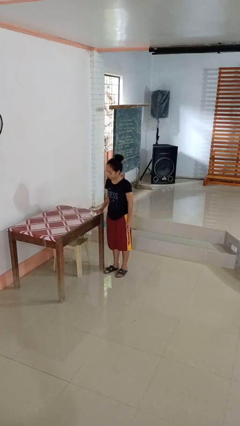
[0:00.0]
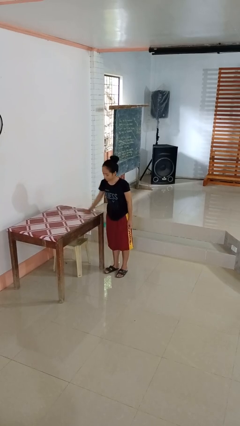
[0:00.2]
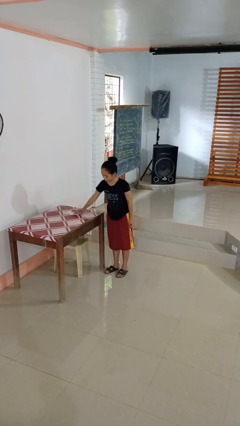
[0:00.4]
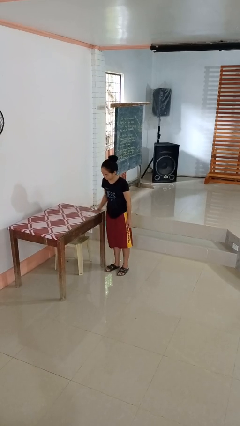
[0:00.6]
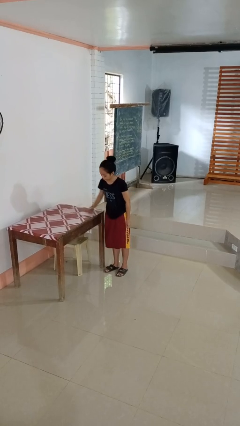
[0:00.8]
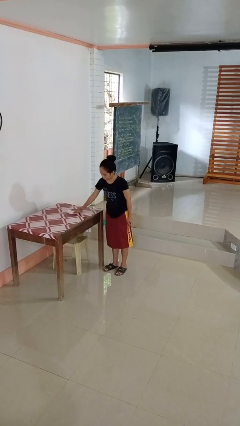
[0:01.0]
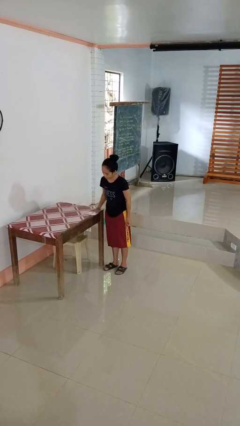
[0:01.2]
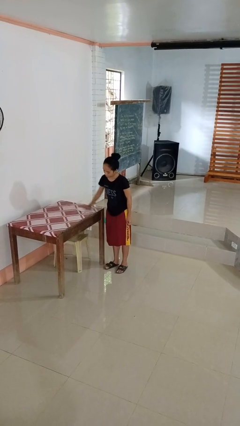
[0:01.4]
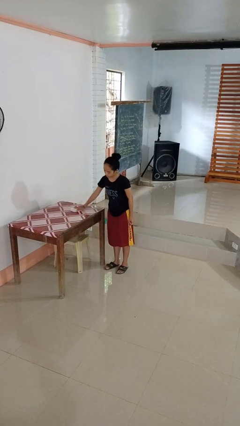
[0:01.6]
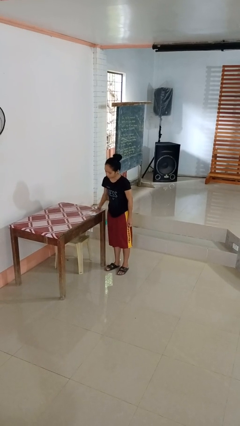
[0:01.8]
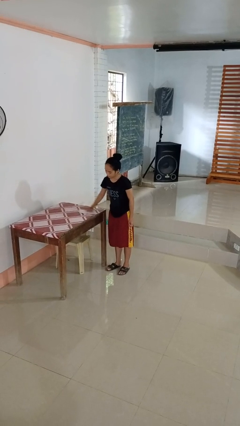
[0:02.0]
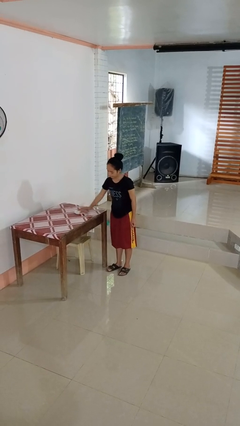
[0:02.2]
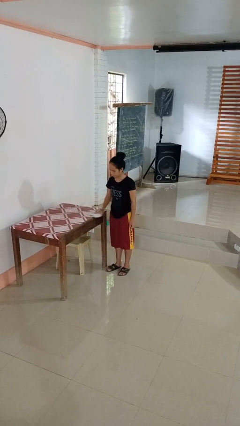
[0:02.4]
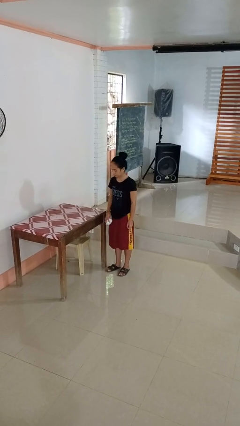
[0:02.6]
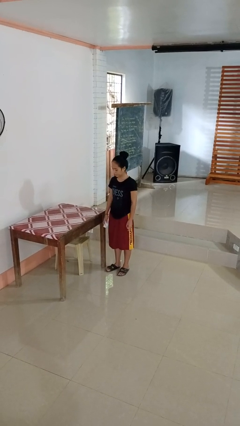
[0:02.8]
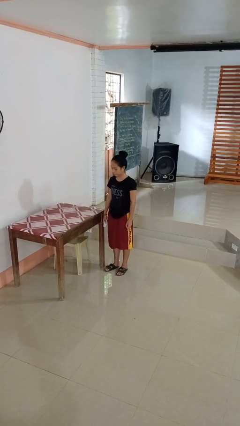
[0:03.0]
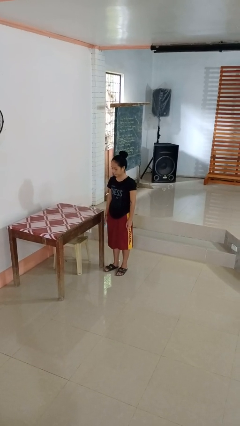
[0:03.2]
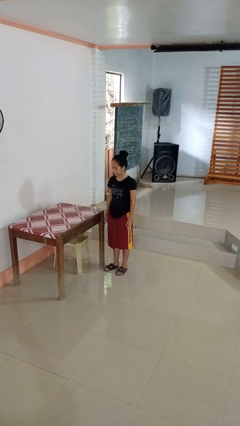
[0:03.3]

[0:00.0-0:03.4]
person cleans table with rag

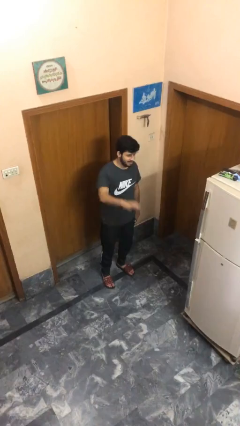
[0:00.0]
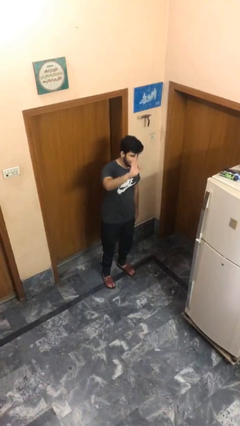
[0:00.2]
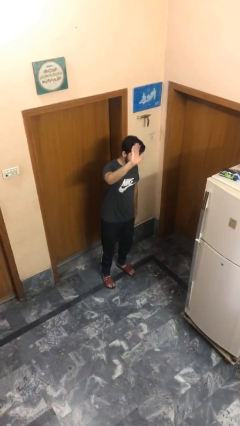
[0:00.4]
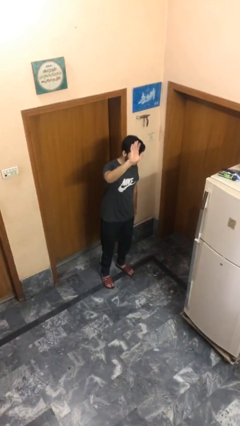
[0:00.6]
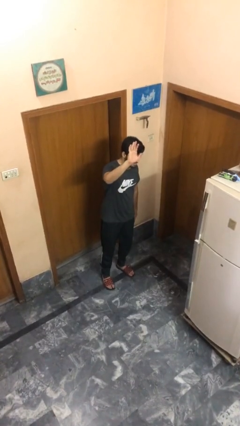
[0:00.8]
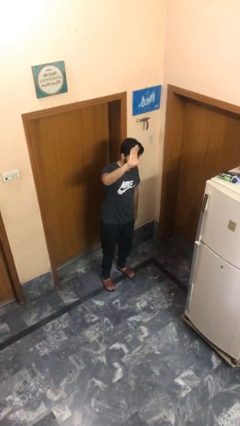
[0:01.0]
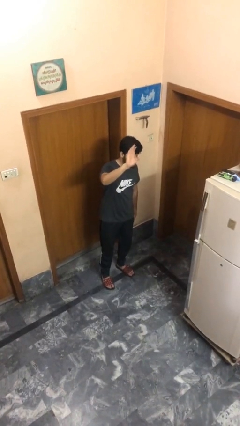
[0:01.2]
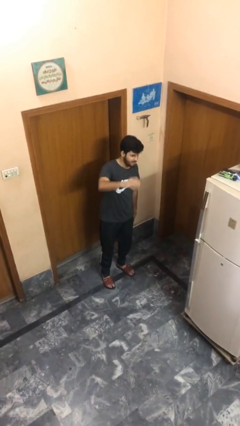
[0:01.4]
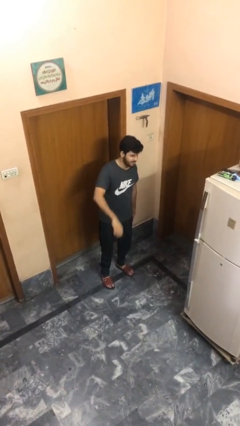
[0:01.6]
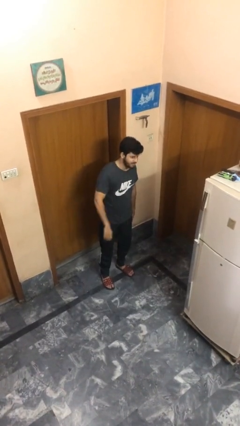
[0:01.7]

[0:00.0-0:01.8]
person waves at person

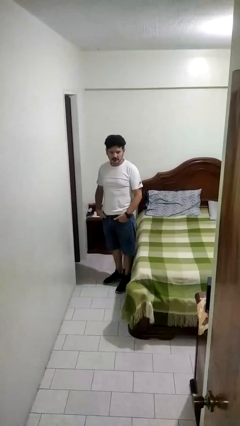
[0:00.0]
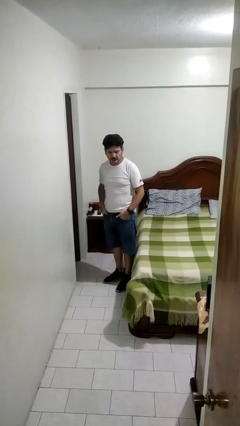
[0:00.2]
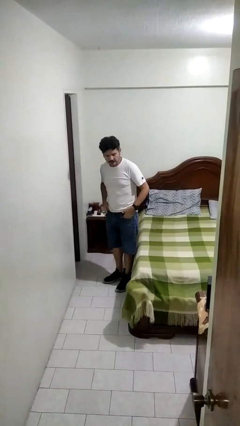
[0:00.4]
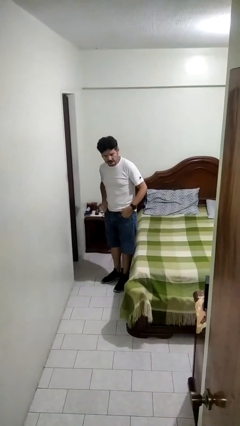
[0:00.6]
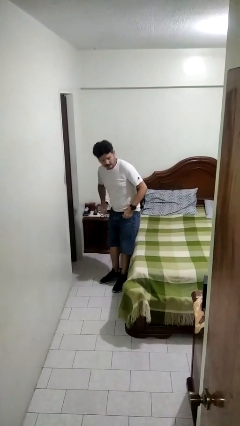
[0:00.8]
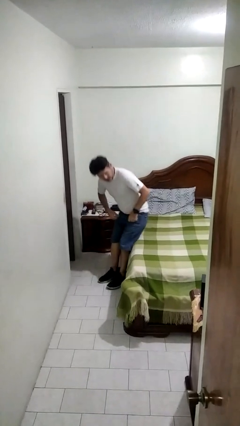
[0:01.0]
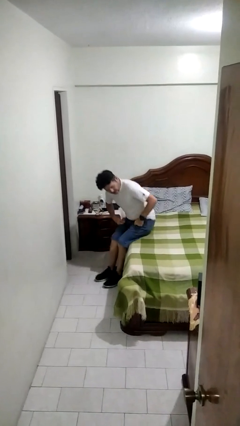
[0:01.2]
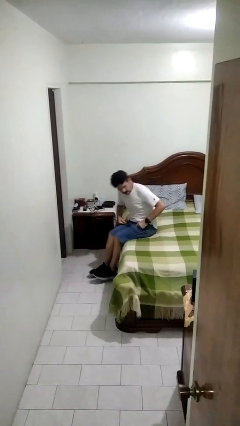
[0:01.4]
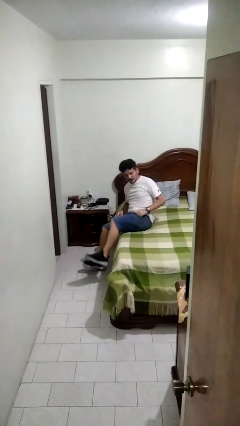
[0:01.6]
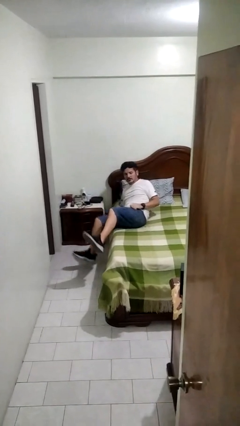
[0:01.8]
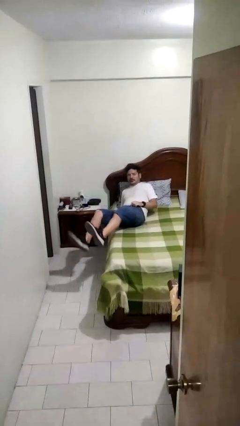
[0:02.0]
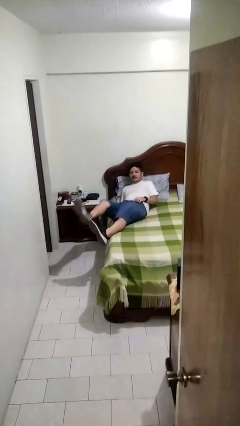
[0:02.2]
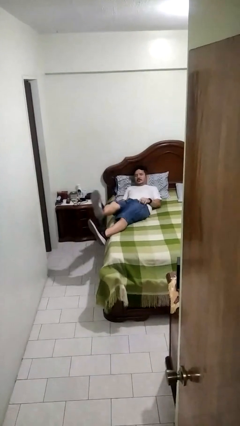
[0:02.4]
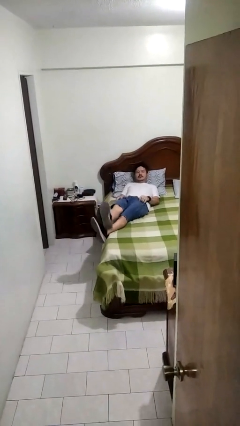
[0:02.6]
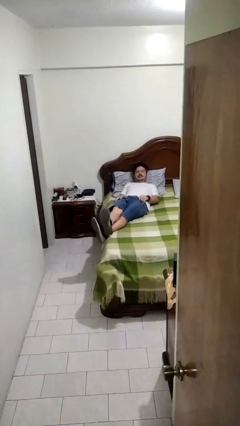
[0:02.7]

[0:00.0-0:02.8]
person lies down on bed

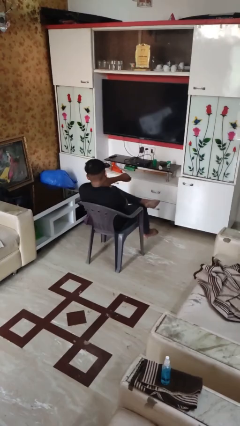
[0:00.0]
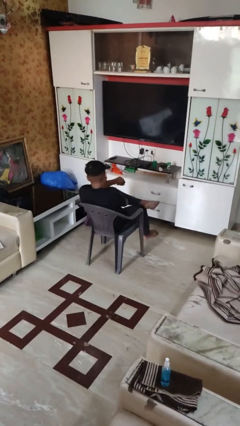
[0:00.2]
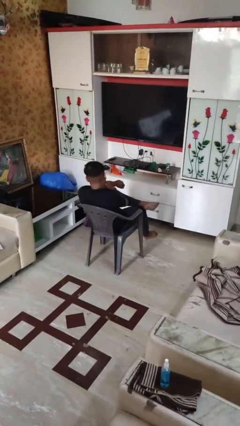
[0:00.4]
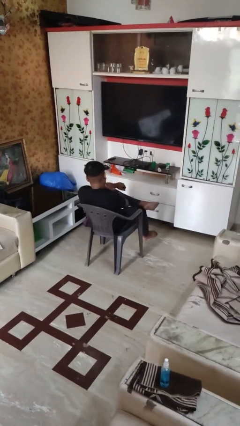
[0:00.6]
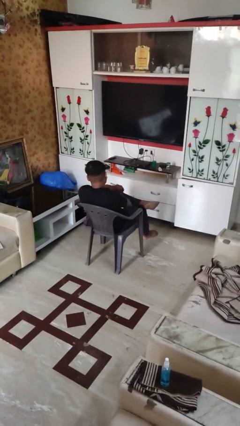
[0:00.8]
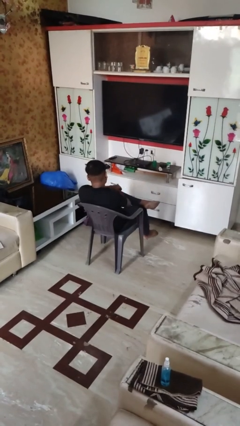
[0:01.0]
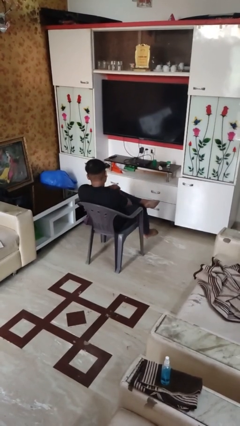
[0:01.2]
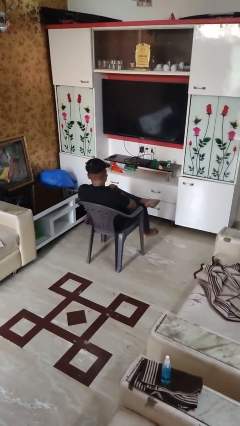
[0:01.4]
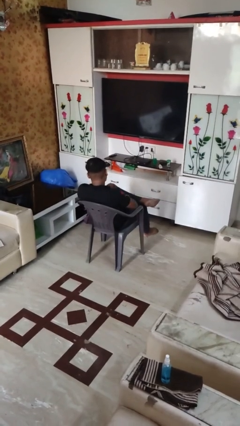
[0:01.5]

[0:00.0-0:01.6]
person swats bug

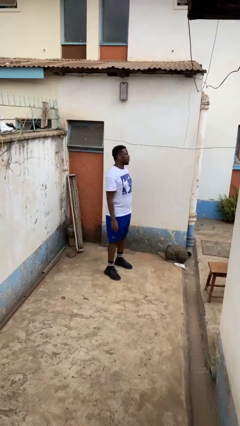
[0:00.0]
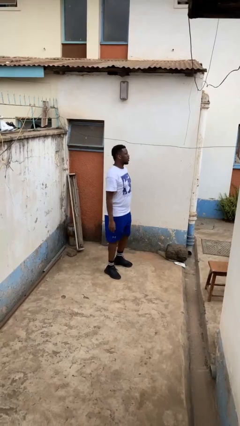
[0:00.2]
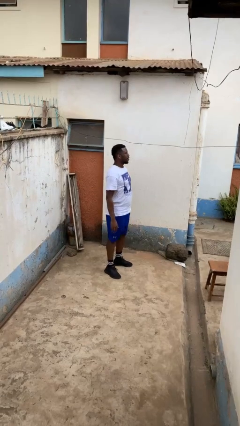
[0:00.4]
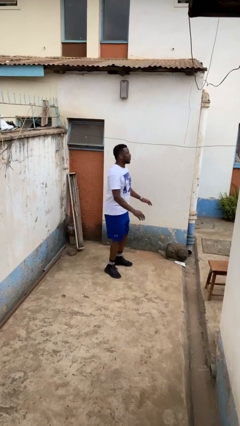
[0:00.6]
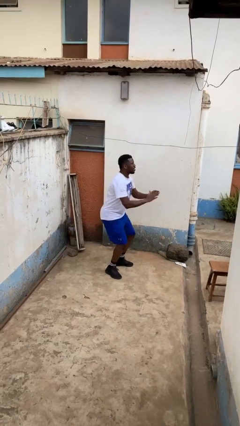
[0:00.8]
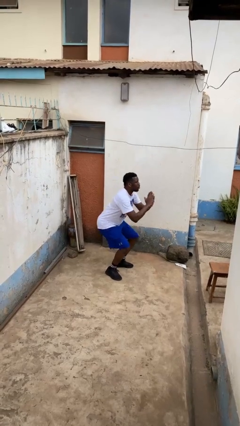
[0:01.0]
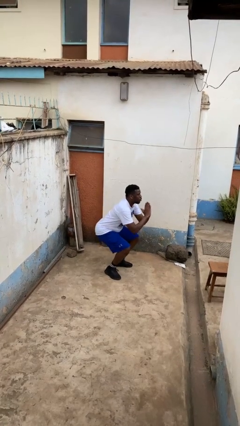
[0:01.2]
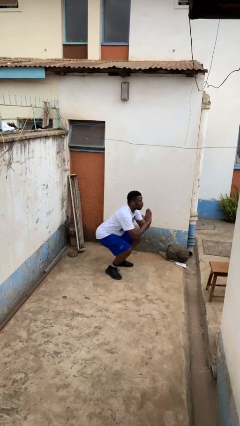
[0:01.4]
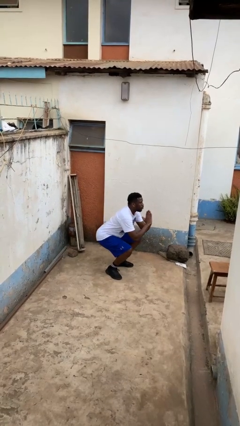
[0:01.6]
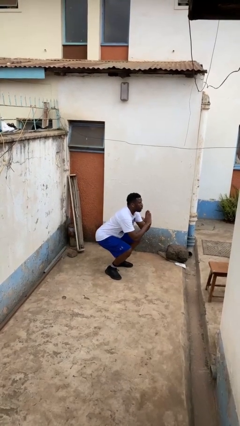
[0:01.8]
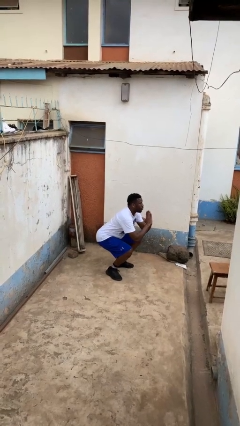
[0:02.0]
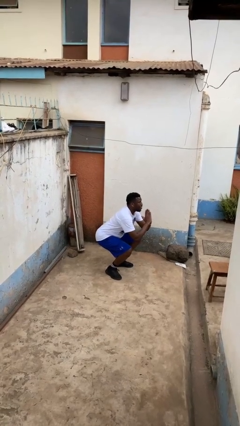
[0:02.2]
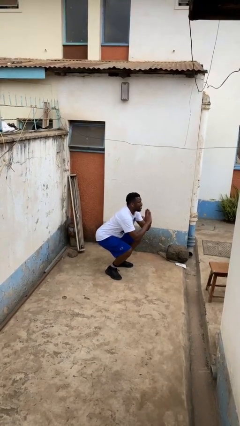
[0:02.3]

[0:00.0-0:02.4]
person squats

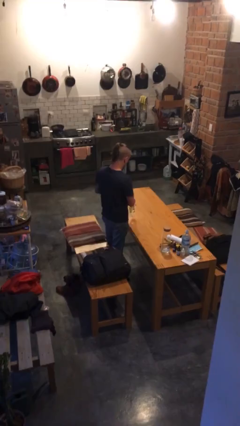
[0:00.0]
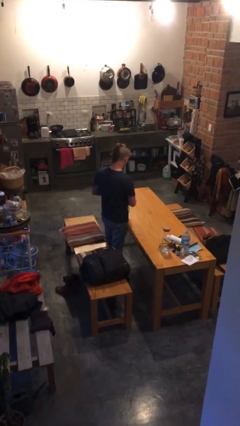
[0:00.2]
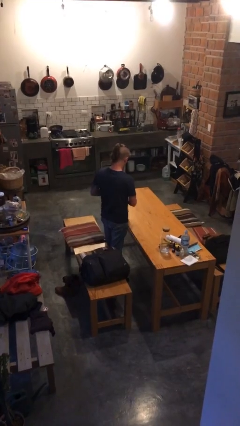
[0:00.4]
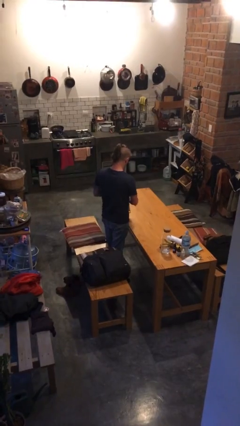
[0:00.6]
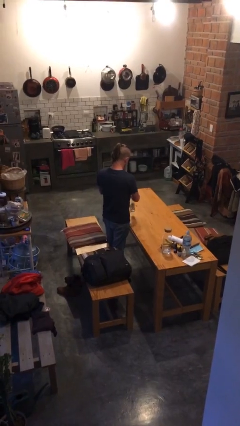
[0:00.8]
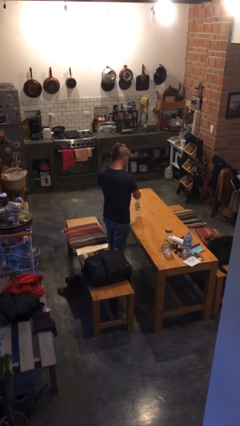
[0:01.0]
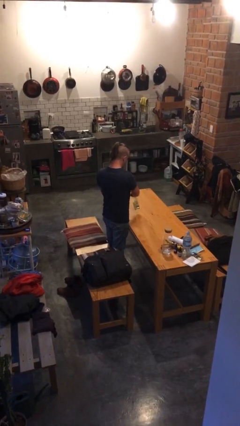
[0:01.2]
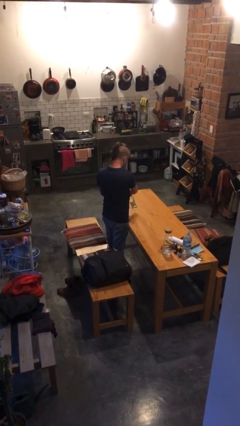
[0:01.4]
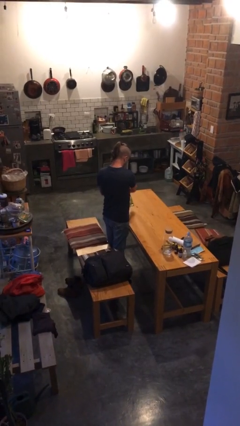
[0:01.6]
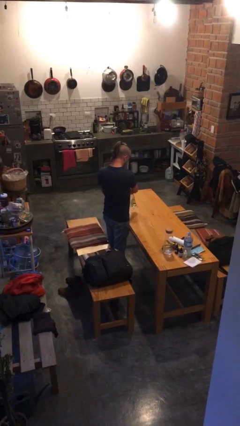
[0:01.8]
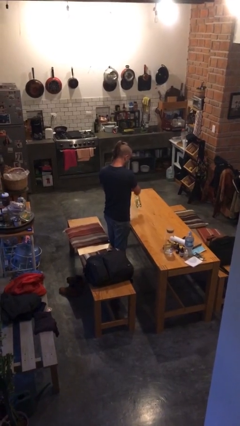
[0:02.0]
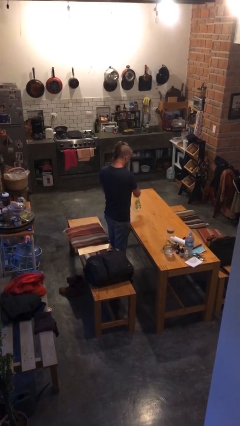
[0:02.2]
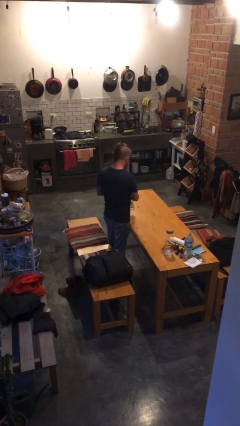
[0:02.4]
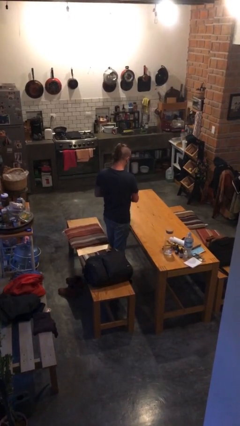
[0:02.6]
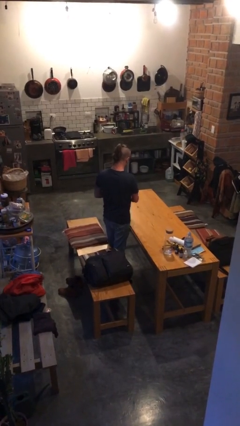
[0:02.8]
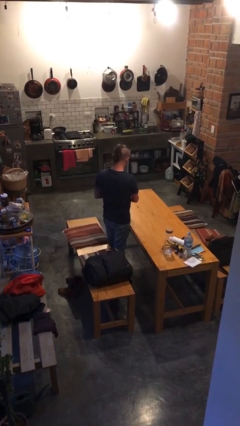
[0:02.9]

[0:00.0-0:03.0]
person sprays from bottle

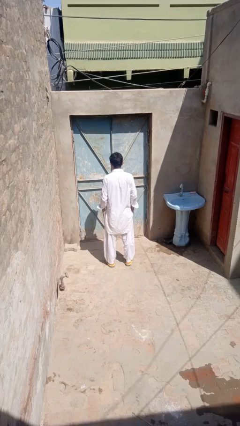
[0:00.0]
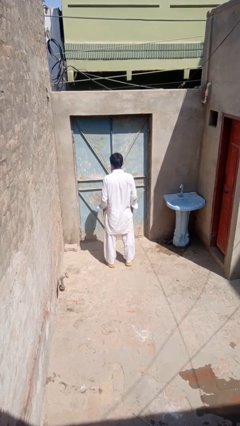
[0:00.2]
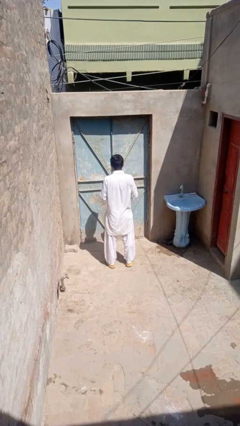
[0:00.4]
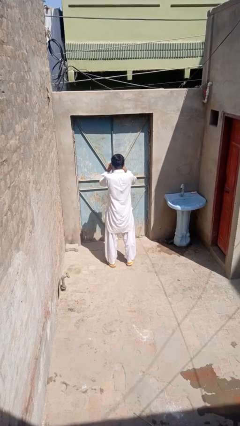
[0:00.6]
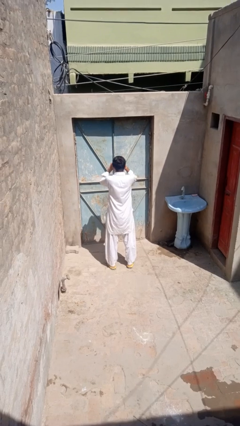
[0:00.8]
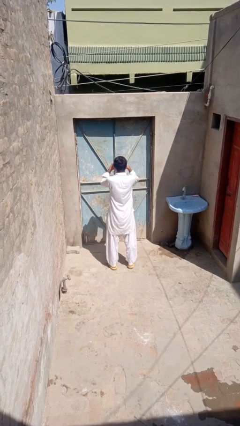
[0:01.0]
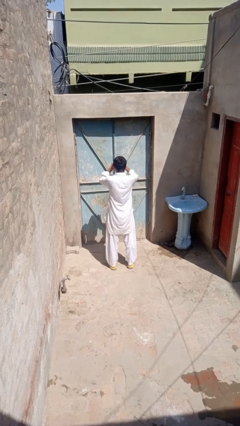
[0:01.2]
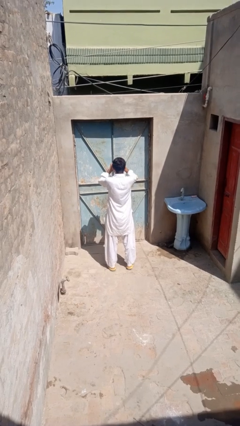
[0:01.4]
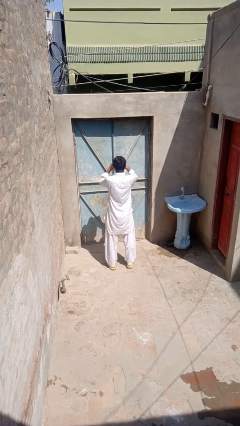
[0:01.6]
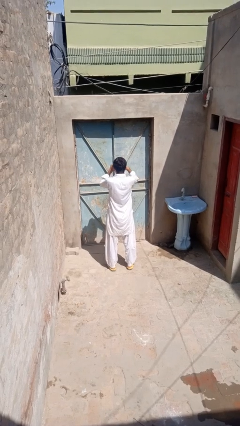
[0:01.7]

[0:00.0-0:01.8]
person rubs eyes

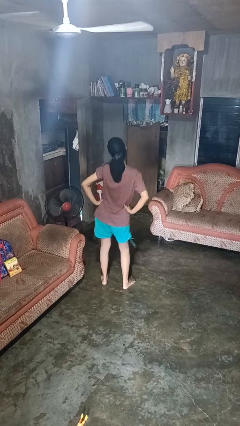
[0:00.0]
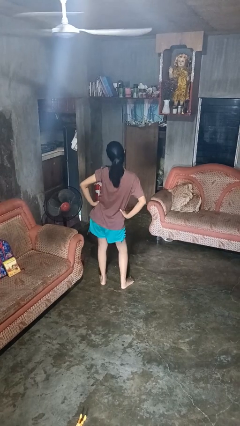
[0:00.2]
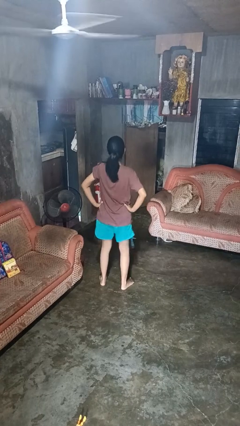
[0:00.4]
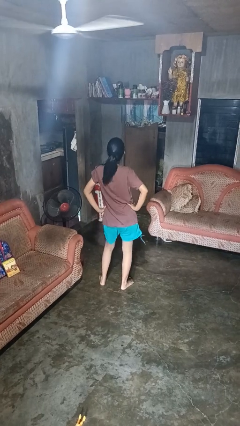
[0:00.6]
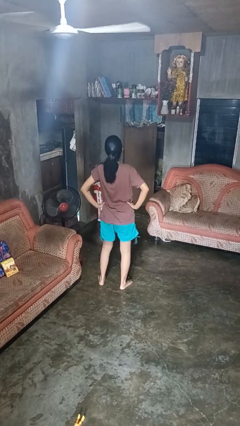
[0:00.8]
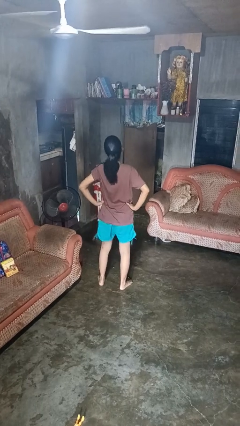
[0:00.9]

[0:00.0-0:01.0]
person dances in place
